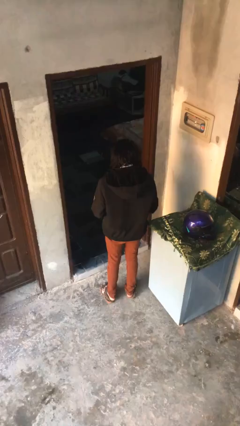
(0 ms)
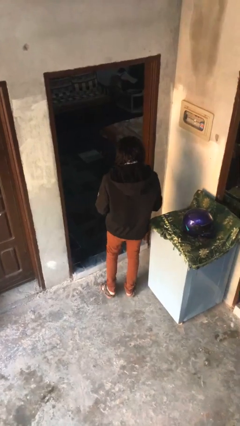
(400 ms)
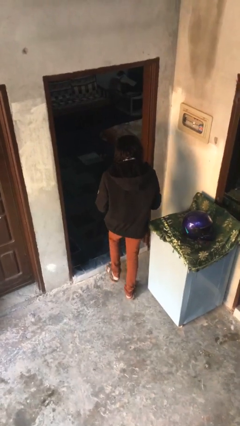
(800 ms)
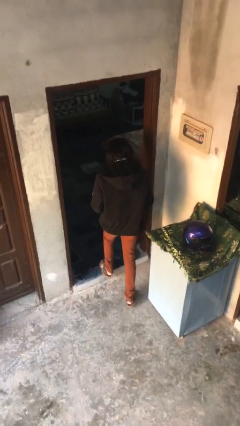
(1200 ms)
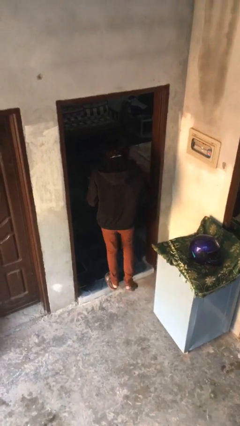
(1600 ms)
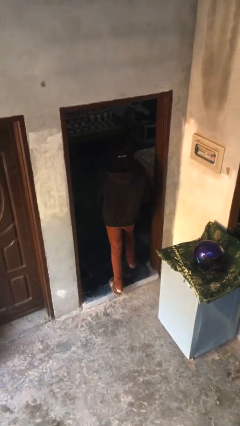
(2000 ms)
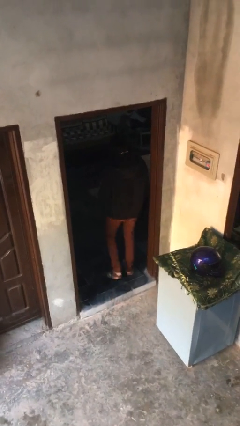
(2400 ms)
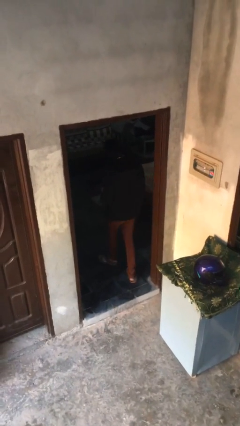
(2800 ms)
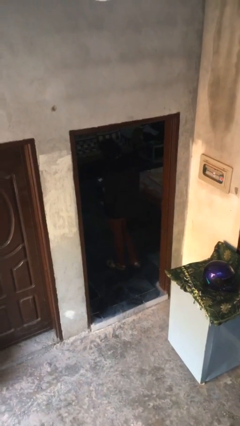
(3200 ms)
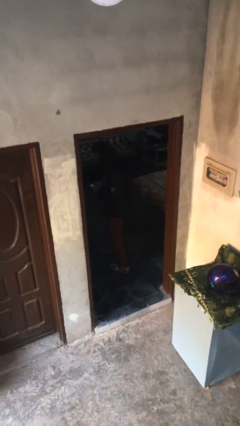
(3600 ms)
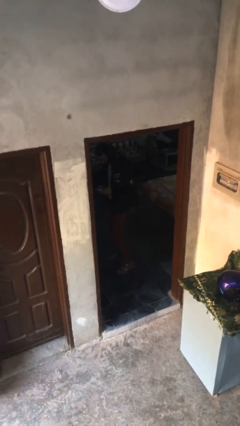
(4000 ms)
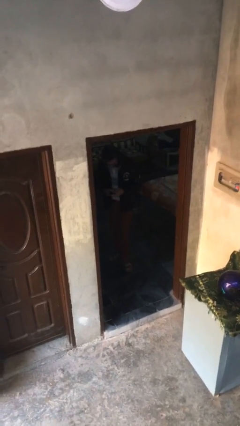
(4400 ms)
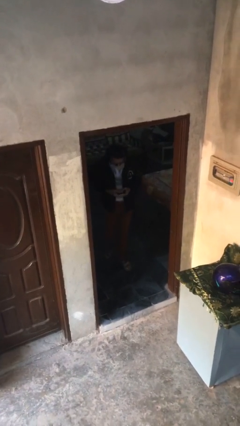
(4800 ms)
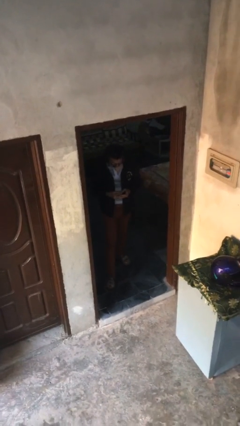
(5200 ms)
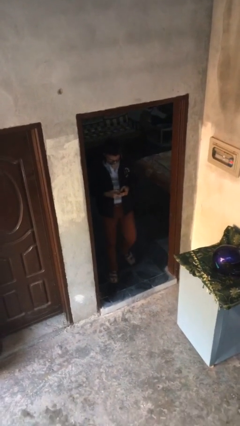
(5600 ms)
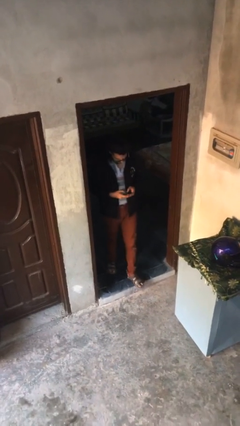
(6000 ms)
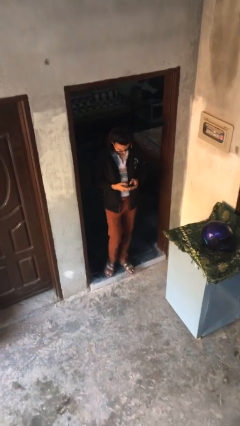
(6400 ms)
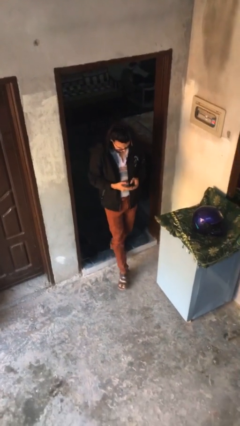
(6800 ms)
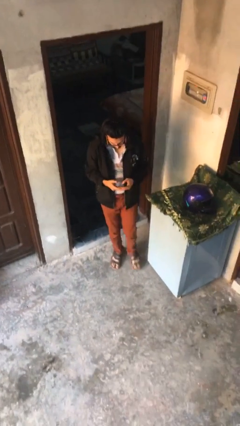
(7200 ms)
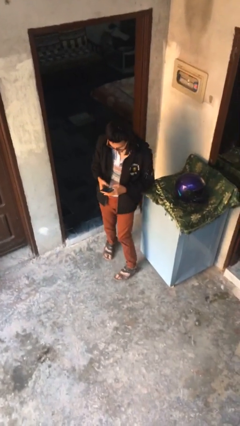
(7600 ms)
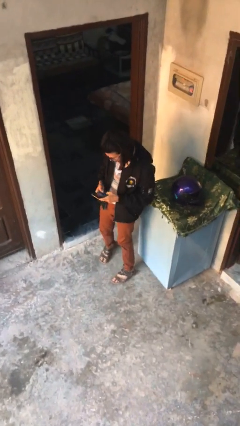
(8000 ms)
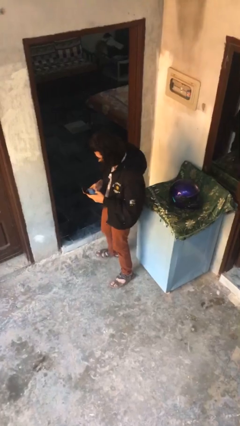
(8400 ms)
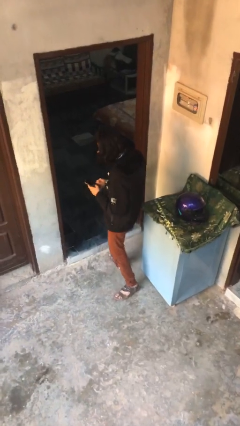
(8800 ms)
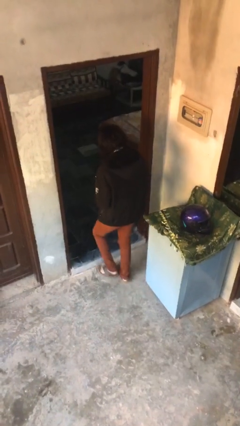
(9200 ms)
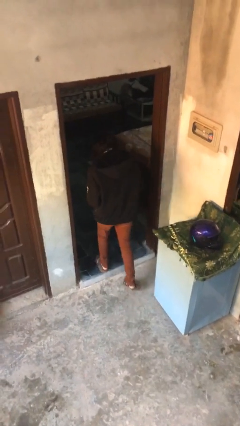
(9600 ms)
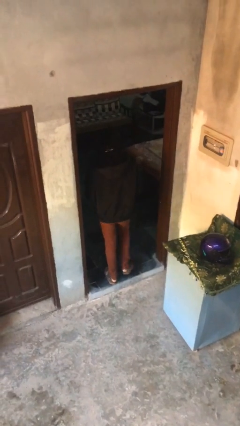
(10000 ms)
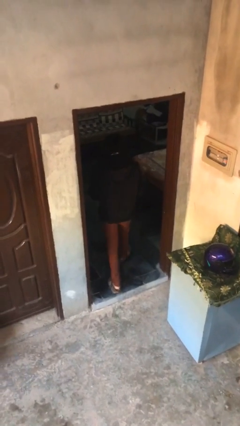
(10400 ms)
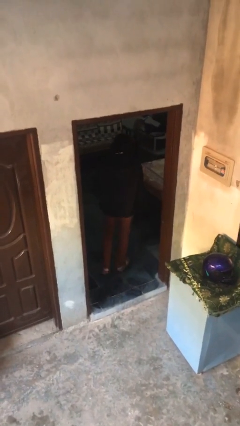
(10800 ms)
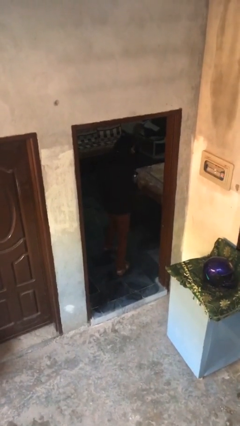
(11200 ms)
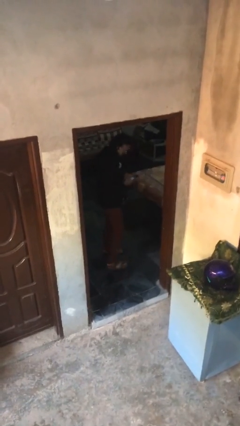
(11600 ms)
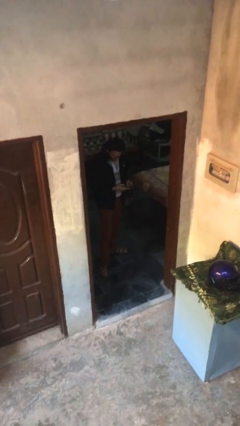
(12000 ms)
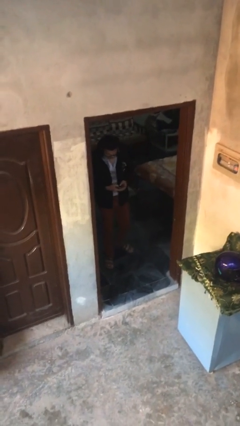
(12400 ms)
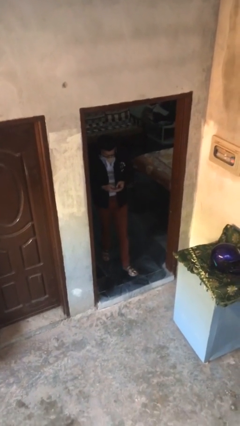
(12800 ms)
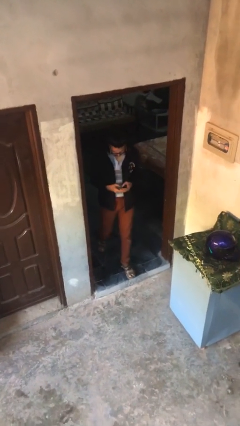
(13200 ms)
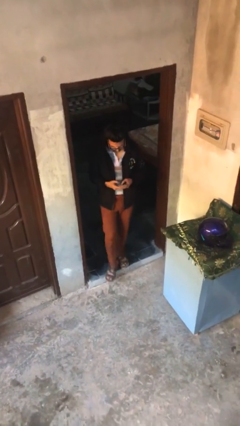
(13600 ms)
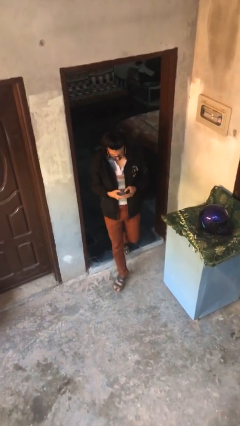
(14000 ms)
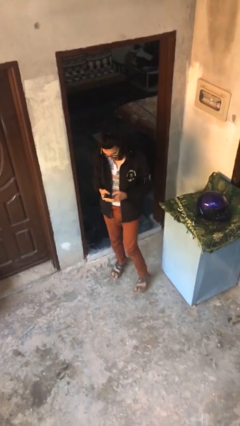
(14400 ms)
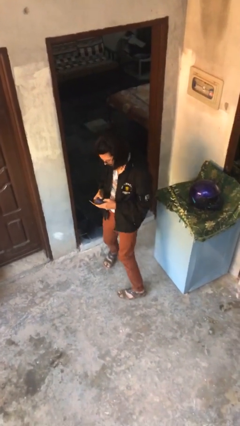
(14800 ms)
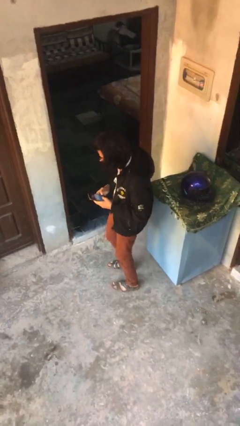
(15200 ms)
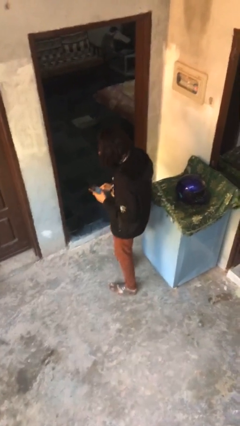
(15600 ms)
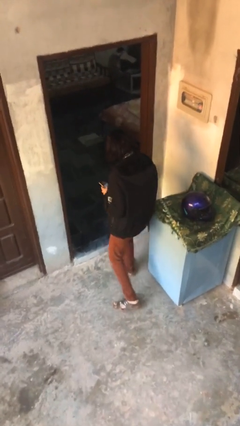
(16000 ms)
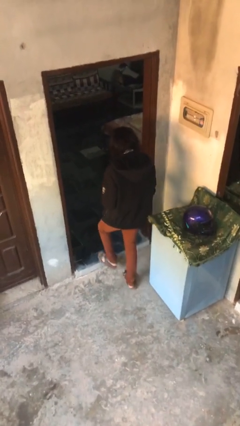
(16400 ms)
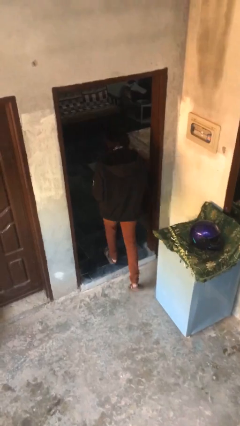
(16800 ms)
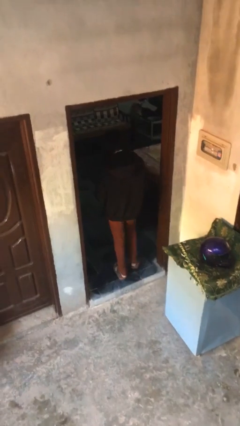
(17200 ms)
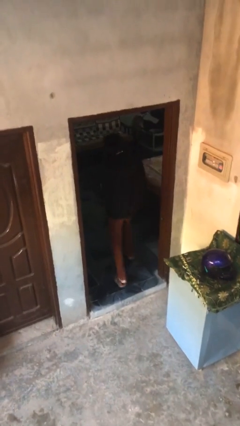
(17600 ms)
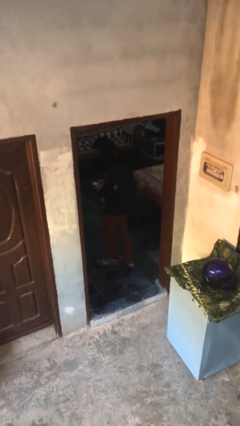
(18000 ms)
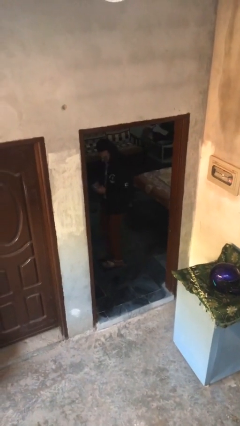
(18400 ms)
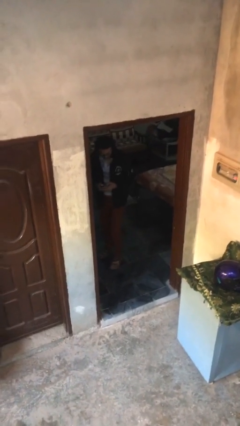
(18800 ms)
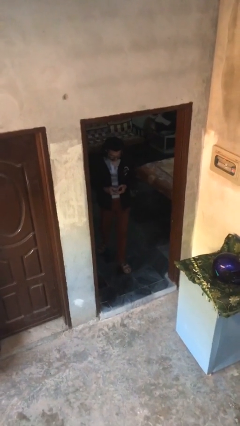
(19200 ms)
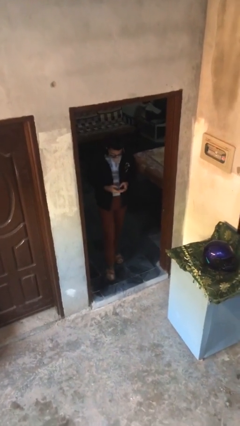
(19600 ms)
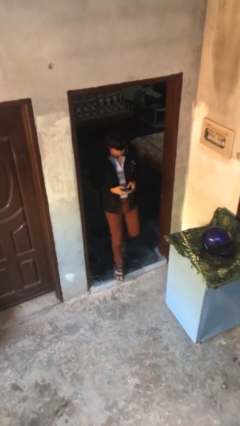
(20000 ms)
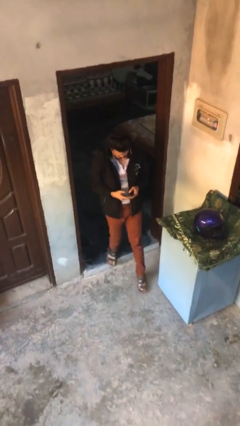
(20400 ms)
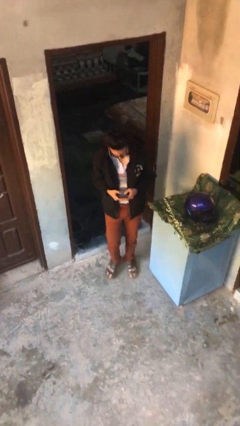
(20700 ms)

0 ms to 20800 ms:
person texts on phone

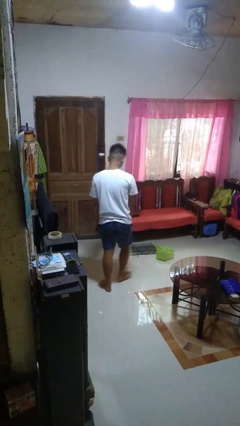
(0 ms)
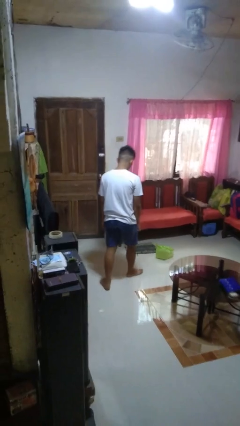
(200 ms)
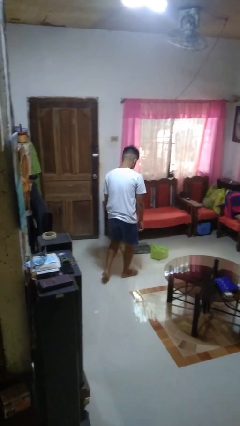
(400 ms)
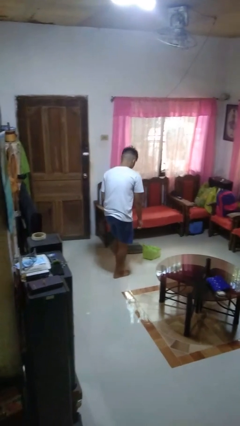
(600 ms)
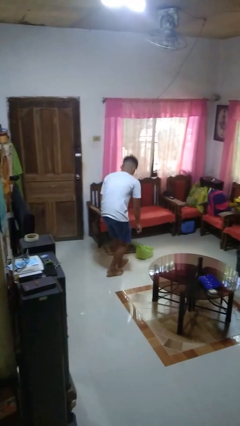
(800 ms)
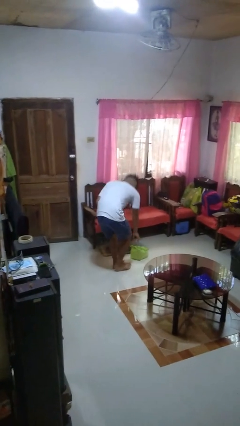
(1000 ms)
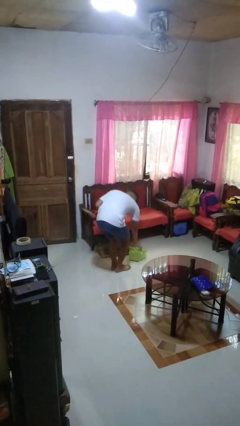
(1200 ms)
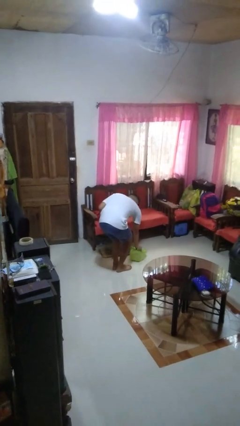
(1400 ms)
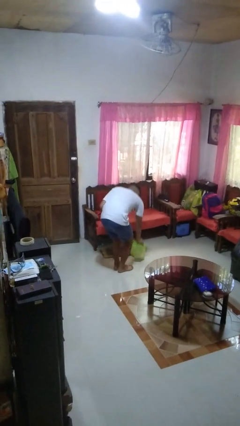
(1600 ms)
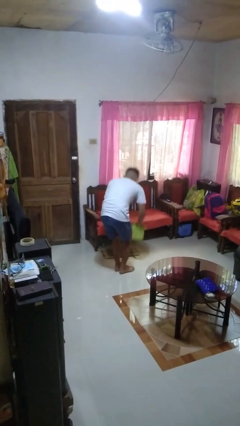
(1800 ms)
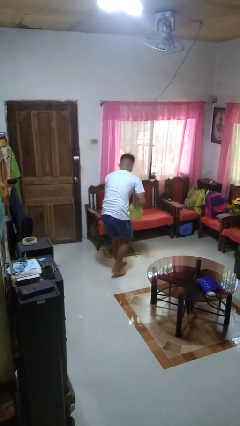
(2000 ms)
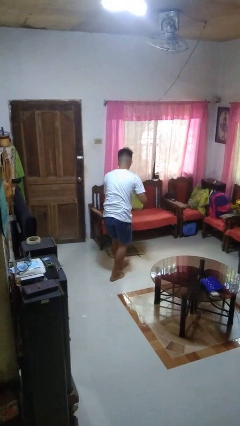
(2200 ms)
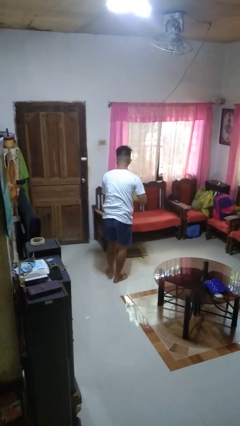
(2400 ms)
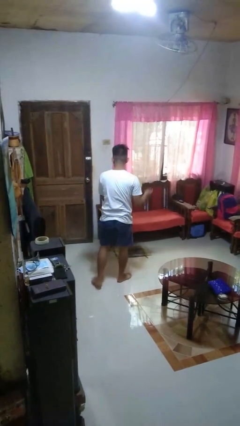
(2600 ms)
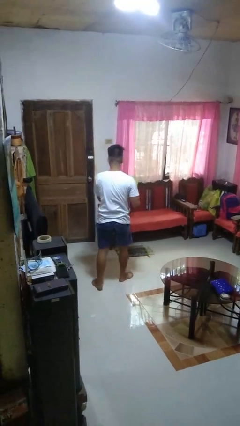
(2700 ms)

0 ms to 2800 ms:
person picks up object from floor

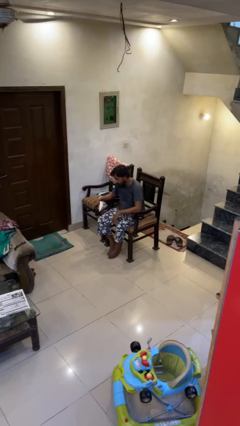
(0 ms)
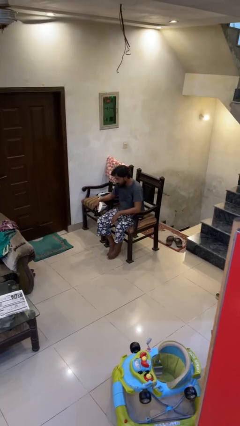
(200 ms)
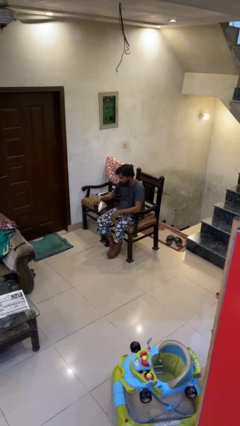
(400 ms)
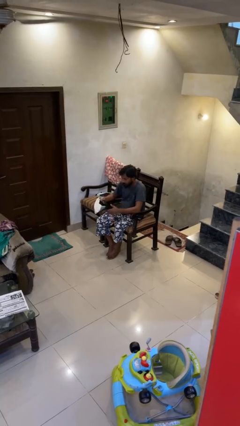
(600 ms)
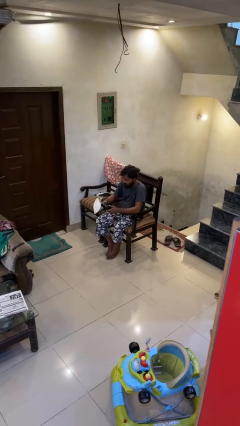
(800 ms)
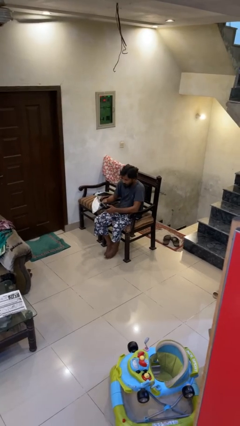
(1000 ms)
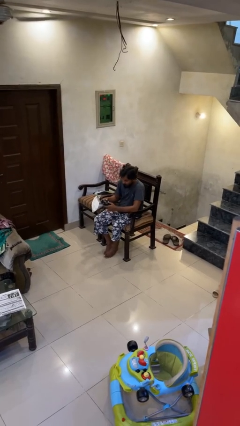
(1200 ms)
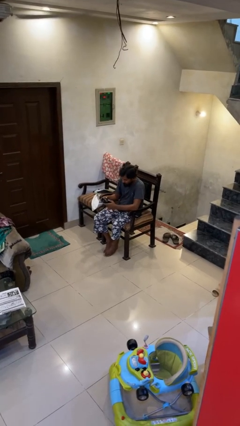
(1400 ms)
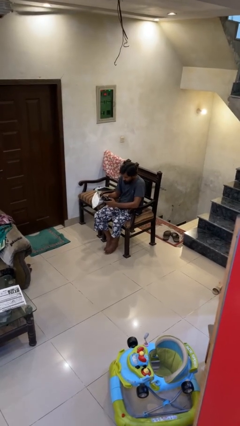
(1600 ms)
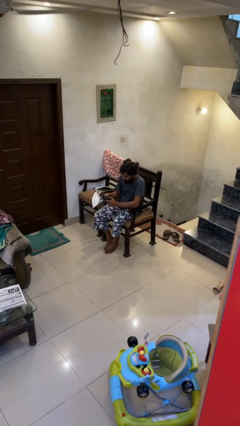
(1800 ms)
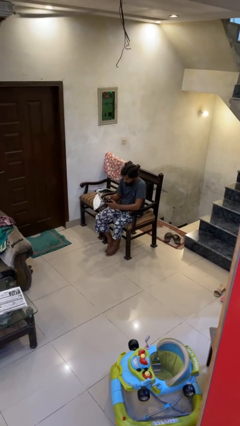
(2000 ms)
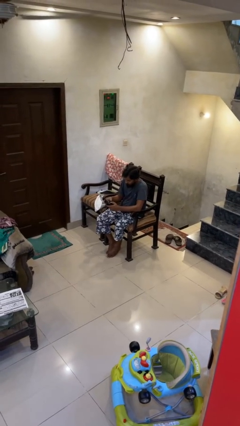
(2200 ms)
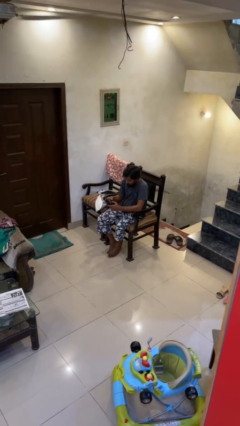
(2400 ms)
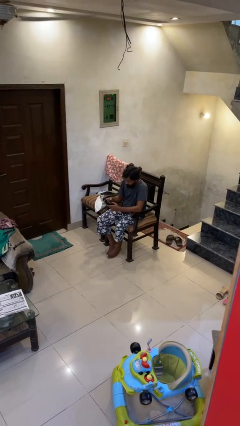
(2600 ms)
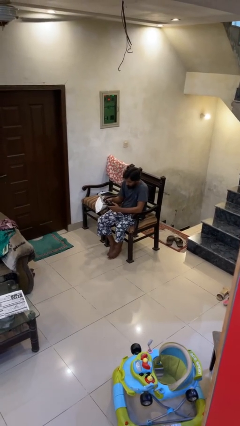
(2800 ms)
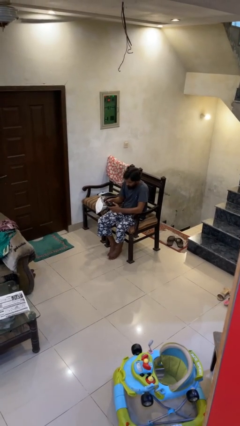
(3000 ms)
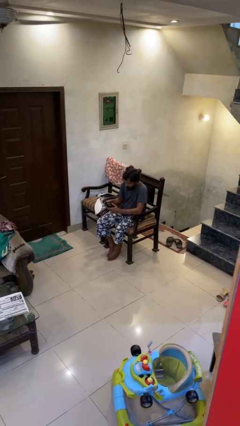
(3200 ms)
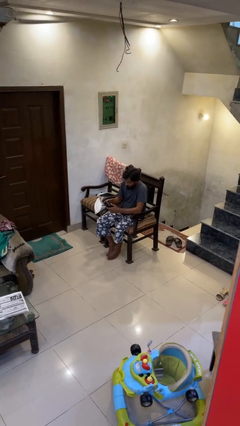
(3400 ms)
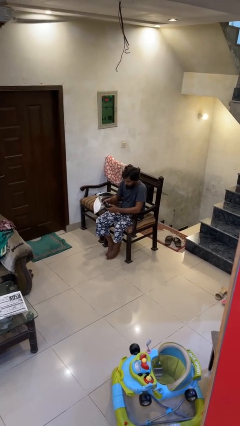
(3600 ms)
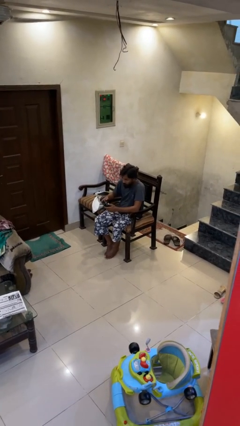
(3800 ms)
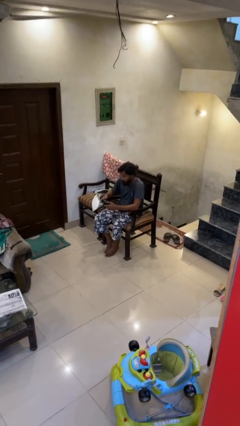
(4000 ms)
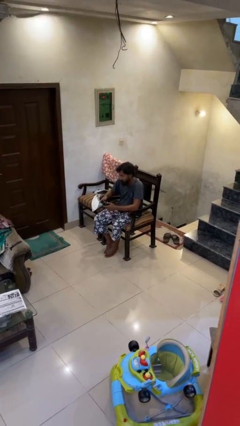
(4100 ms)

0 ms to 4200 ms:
person interacts with handheld game

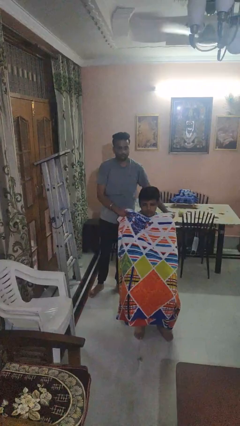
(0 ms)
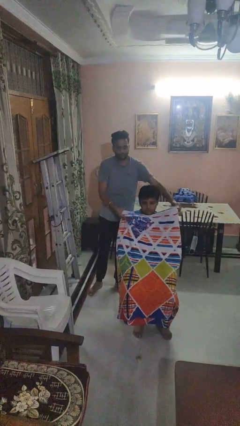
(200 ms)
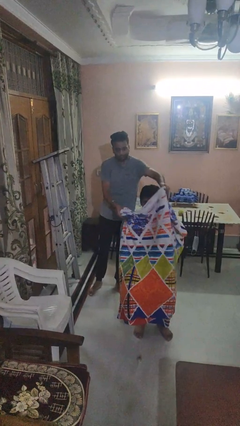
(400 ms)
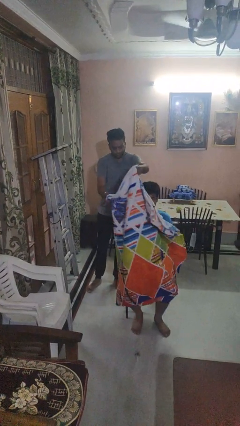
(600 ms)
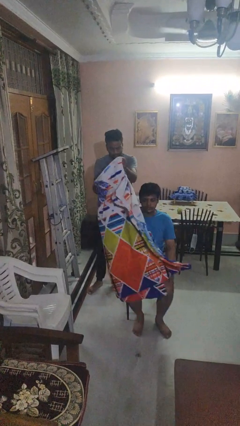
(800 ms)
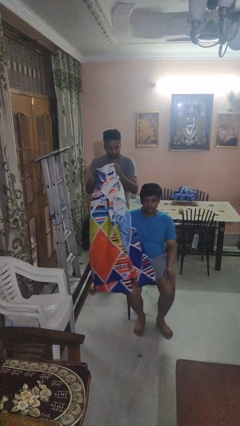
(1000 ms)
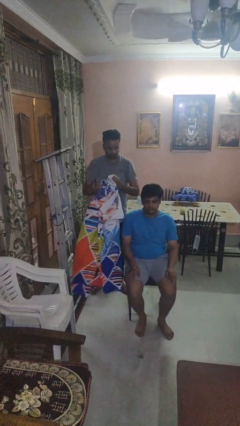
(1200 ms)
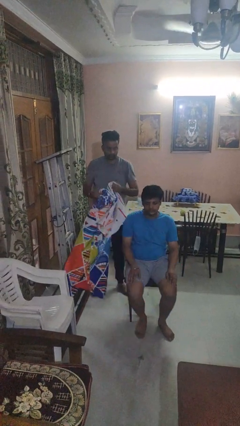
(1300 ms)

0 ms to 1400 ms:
person uncovers friend with blanket
